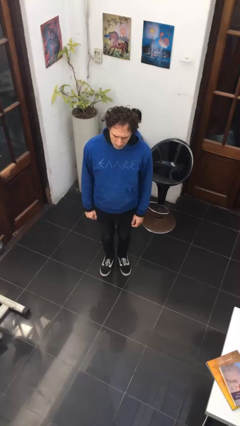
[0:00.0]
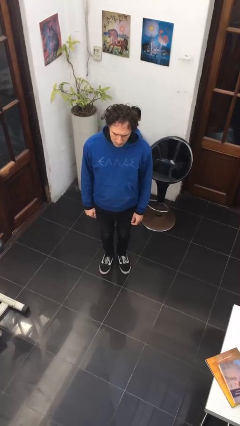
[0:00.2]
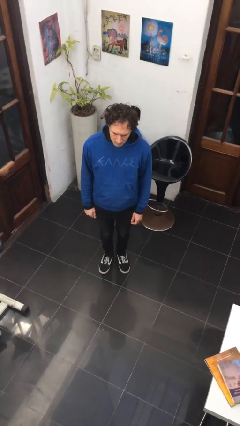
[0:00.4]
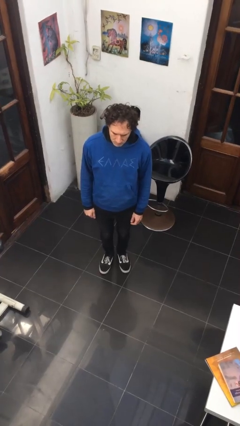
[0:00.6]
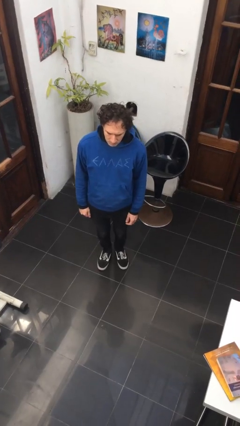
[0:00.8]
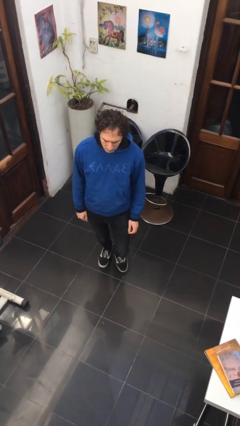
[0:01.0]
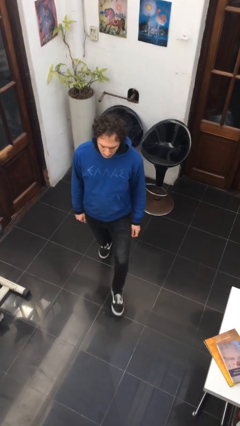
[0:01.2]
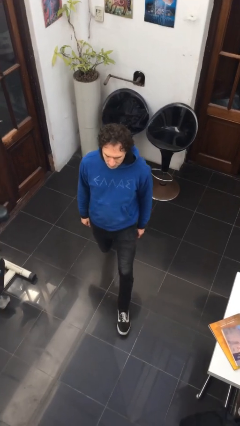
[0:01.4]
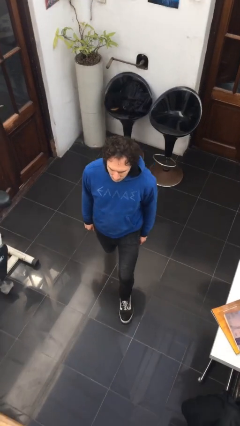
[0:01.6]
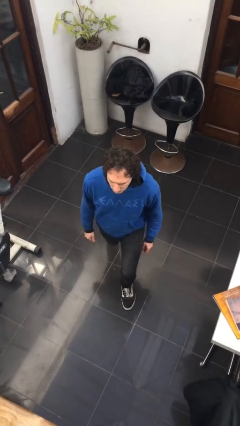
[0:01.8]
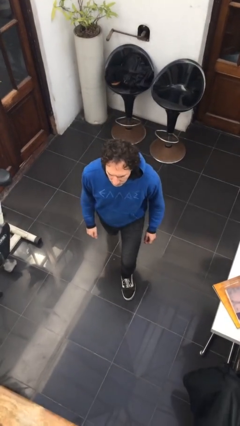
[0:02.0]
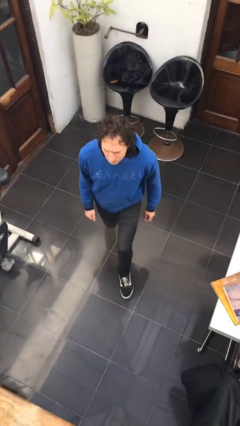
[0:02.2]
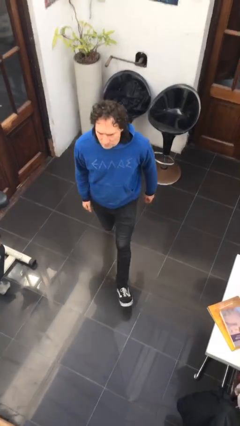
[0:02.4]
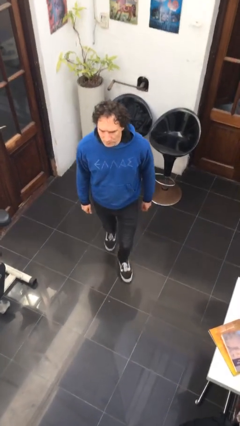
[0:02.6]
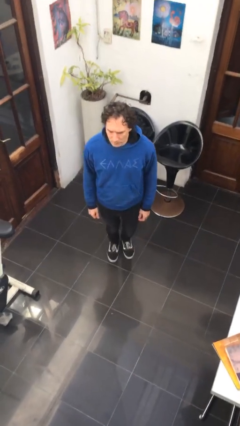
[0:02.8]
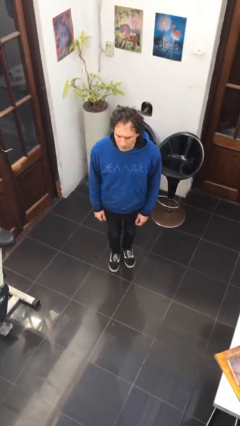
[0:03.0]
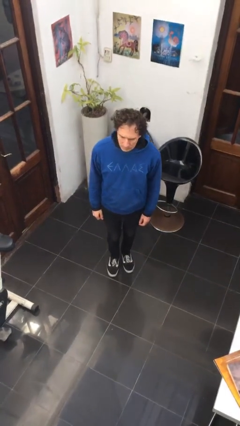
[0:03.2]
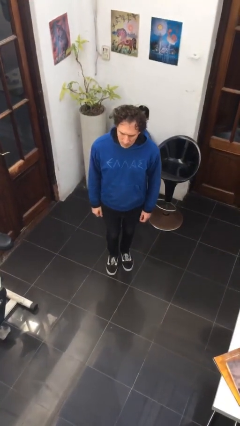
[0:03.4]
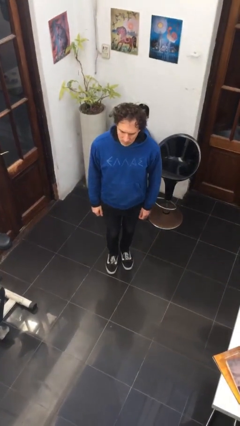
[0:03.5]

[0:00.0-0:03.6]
person exercises with lunges

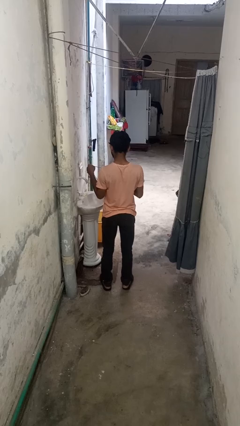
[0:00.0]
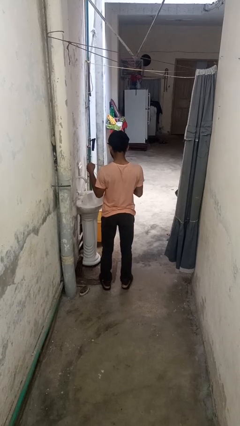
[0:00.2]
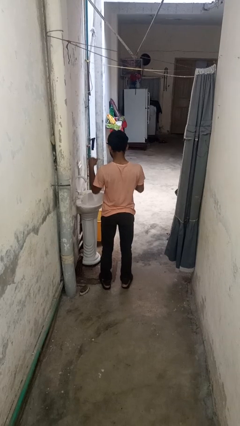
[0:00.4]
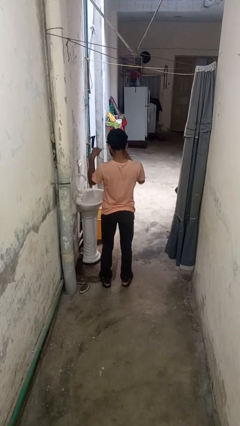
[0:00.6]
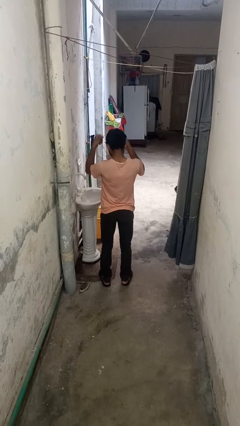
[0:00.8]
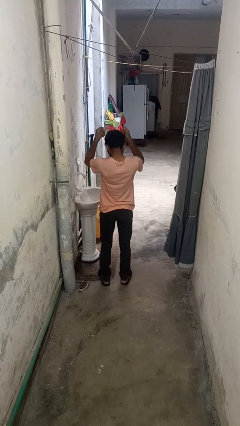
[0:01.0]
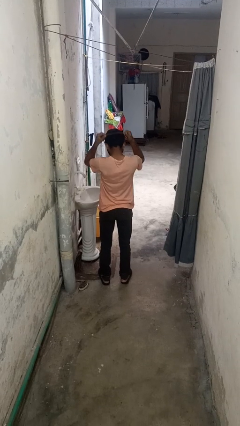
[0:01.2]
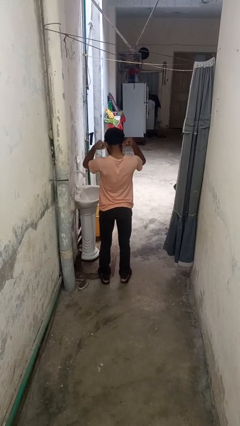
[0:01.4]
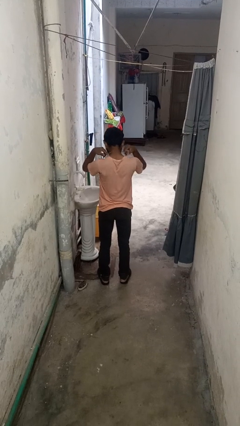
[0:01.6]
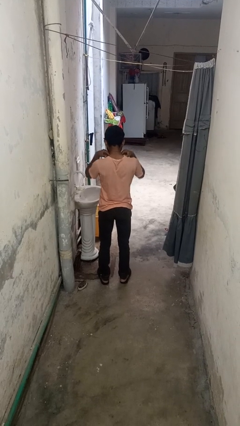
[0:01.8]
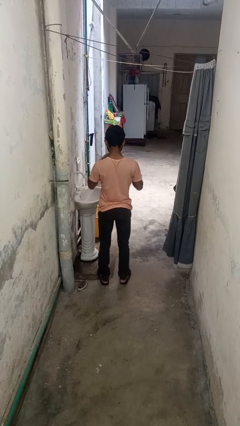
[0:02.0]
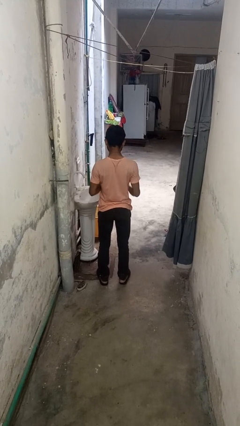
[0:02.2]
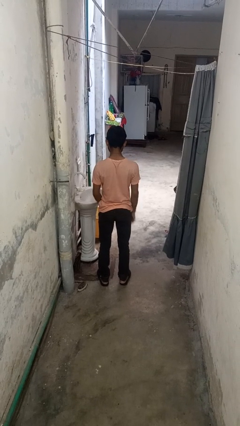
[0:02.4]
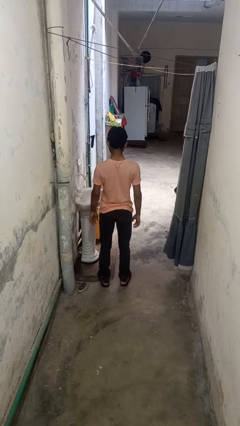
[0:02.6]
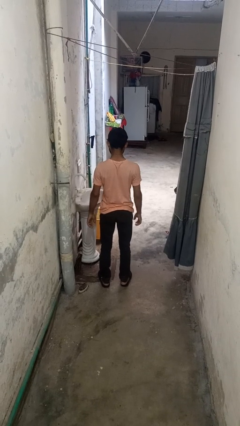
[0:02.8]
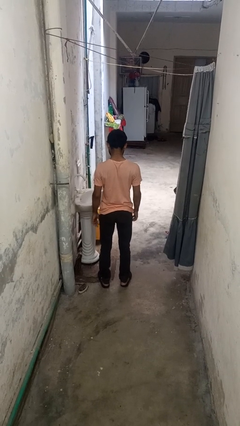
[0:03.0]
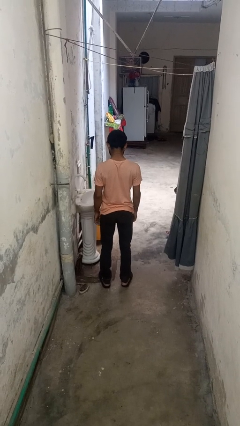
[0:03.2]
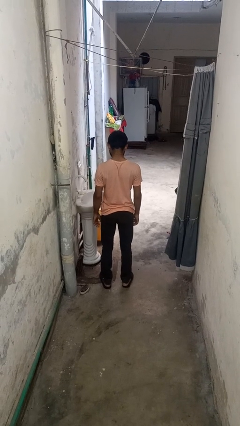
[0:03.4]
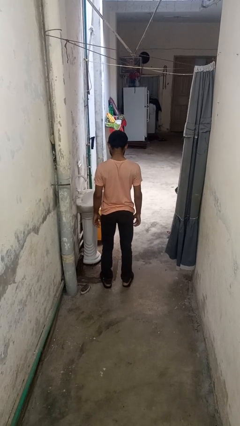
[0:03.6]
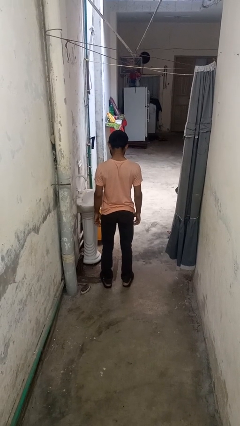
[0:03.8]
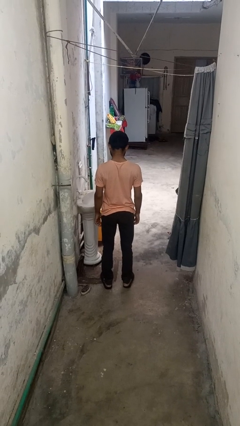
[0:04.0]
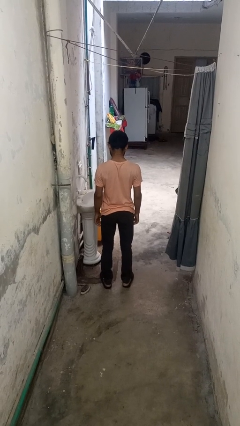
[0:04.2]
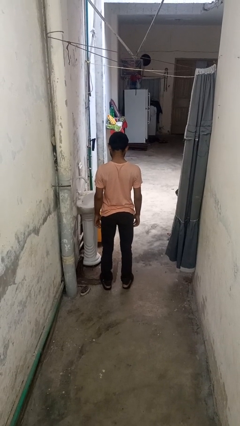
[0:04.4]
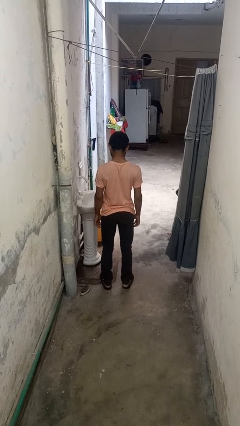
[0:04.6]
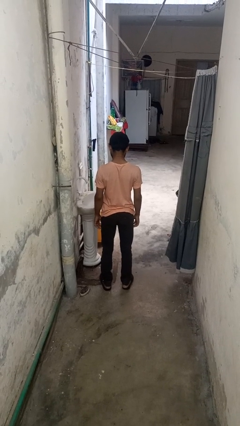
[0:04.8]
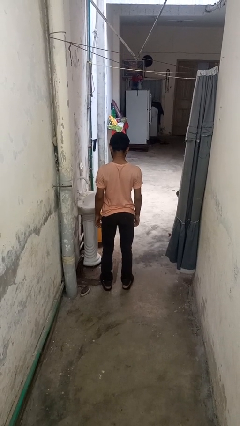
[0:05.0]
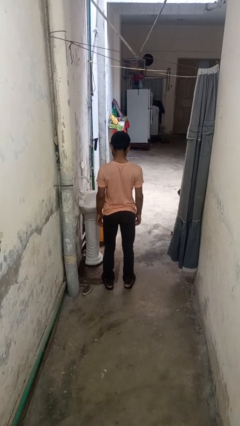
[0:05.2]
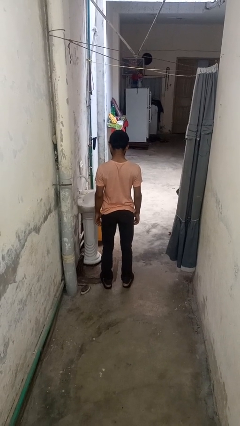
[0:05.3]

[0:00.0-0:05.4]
person puts on necklace

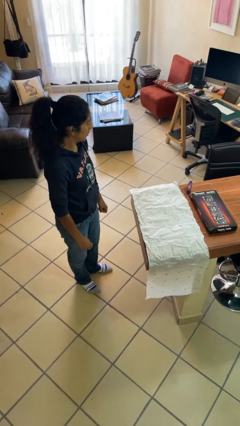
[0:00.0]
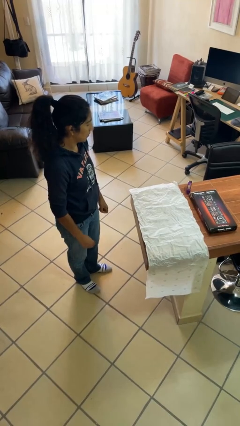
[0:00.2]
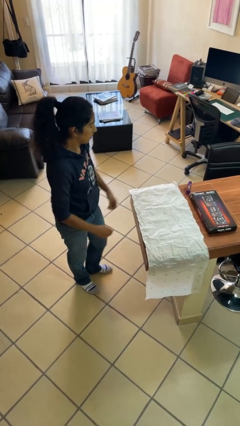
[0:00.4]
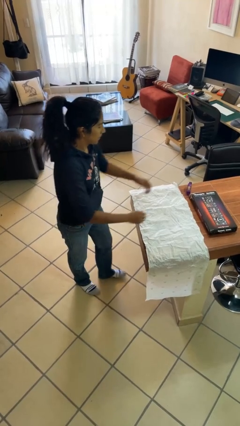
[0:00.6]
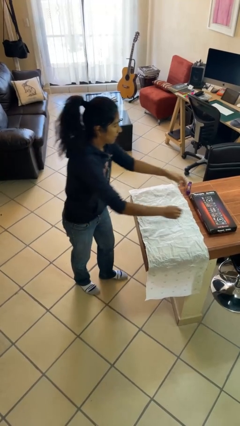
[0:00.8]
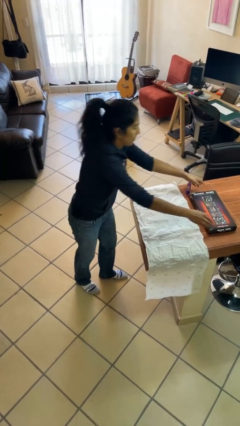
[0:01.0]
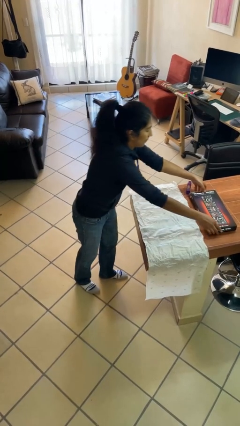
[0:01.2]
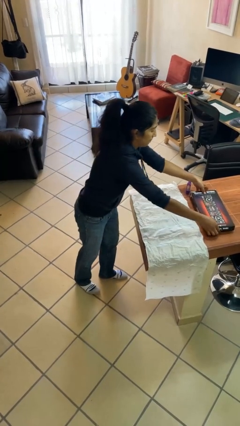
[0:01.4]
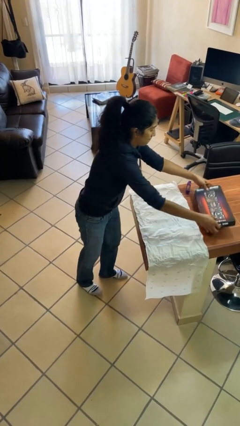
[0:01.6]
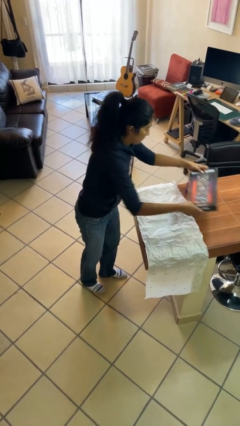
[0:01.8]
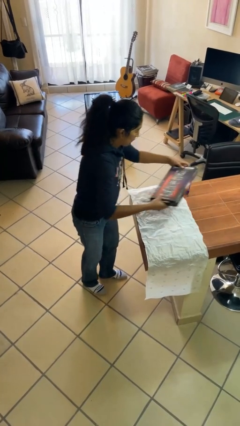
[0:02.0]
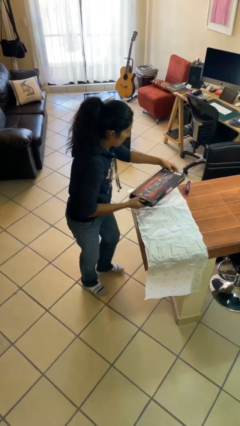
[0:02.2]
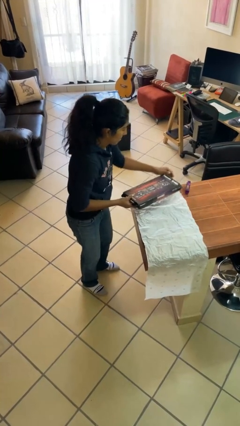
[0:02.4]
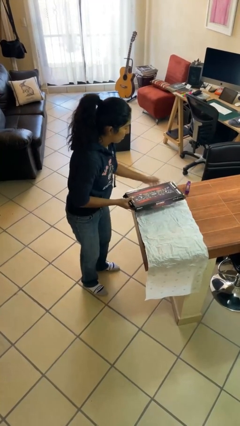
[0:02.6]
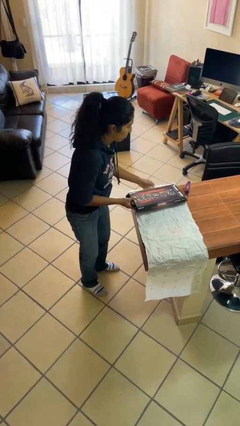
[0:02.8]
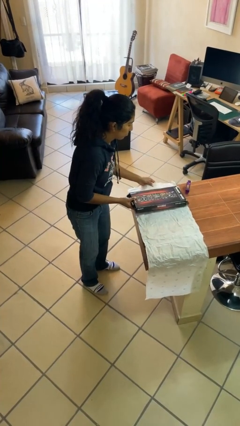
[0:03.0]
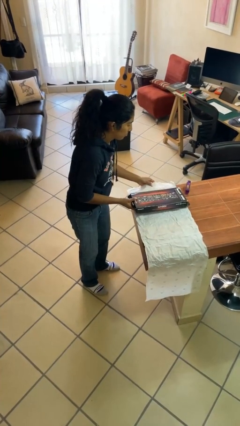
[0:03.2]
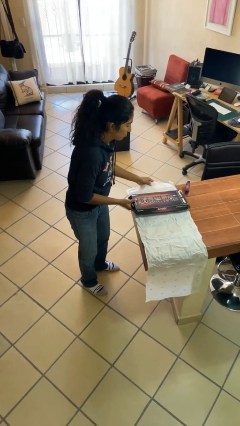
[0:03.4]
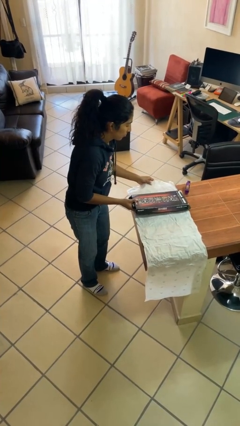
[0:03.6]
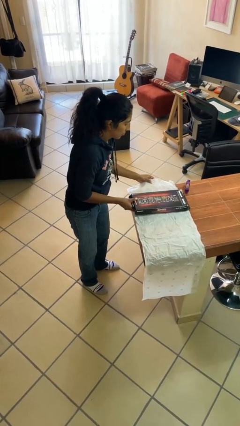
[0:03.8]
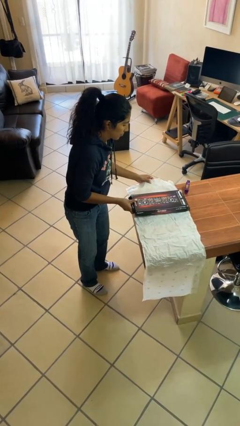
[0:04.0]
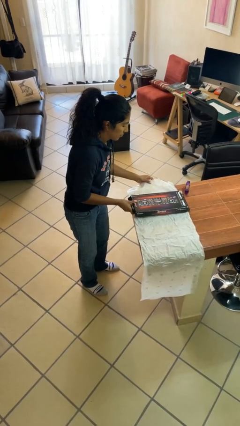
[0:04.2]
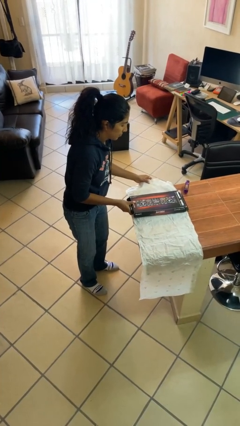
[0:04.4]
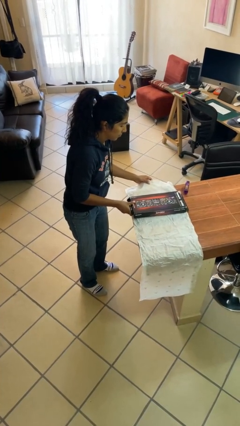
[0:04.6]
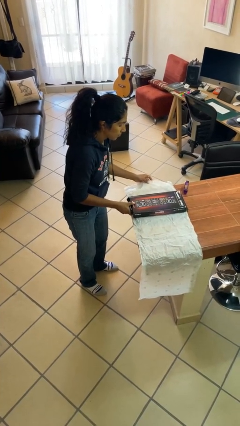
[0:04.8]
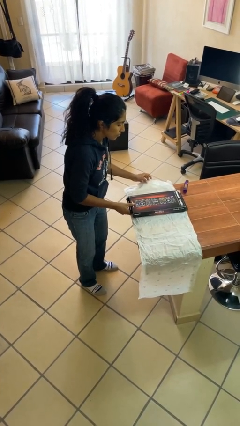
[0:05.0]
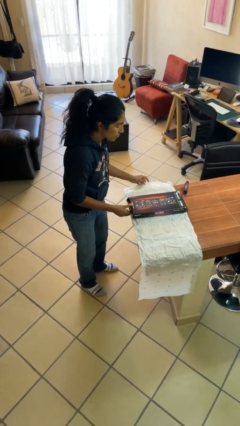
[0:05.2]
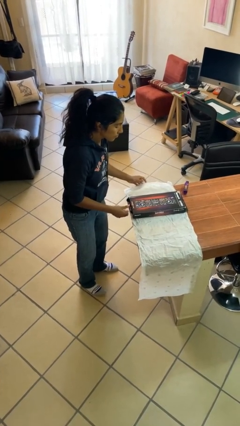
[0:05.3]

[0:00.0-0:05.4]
person wraps box

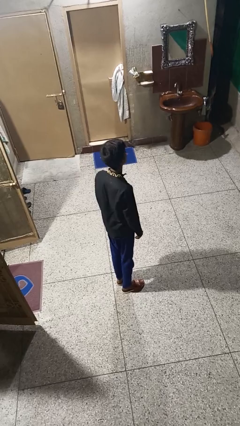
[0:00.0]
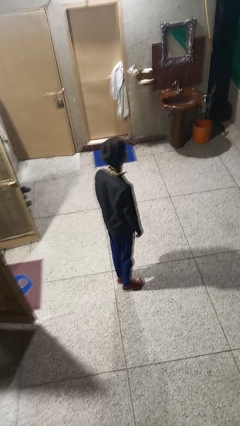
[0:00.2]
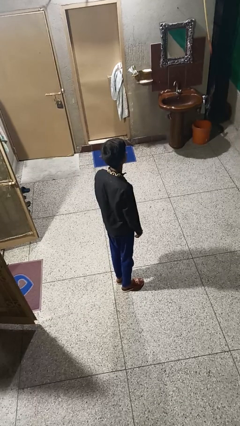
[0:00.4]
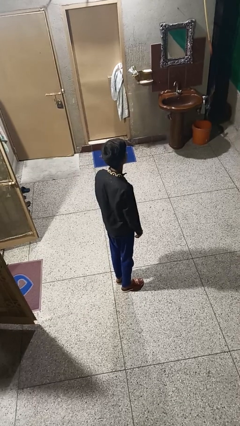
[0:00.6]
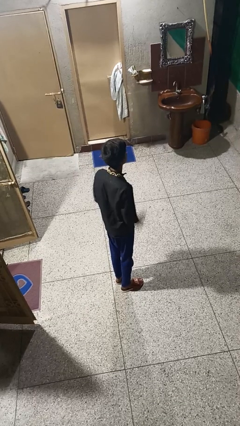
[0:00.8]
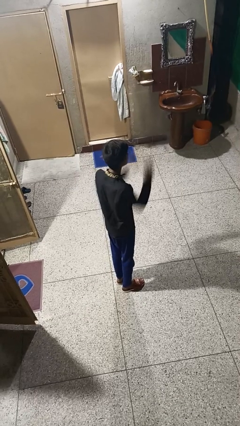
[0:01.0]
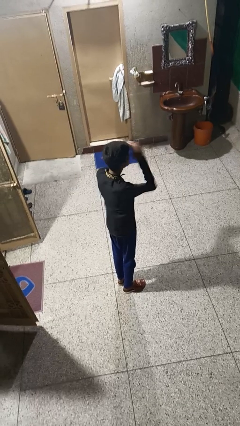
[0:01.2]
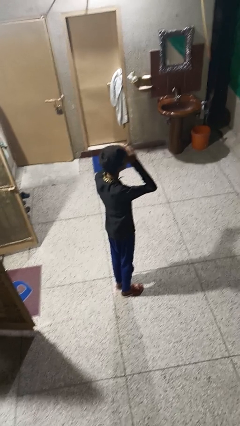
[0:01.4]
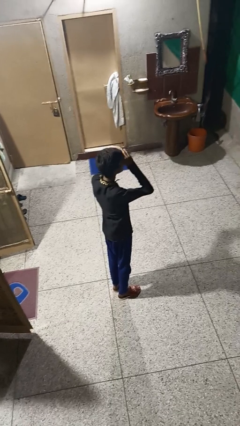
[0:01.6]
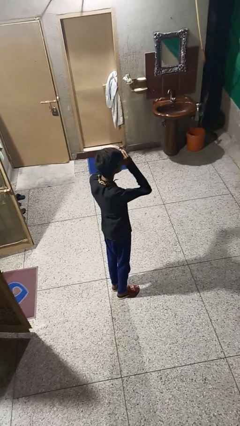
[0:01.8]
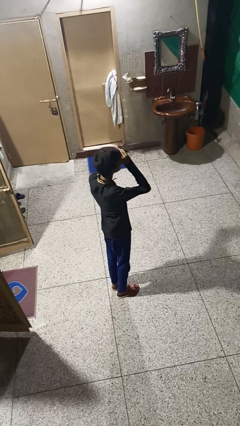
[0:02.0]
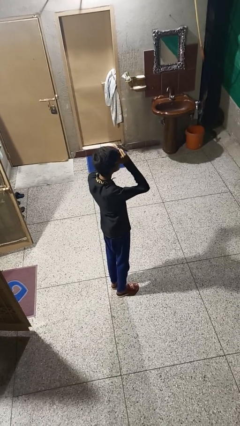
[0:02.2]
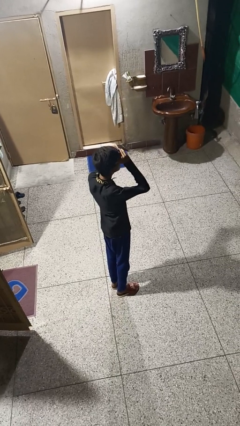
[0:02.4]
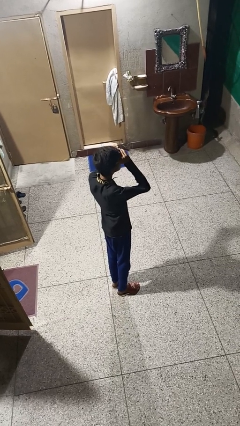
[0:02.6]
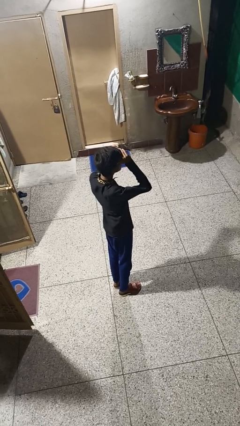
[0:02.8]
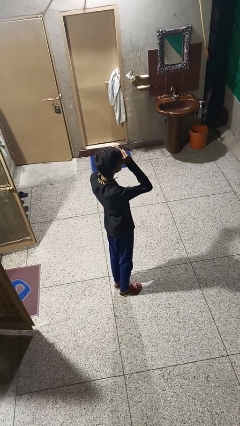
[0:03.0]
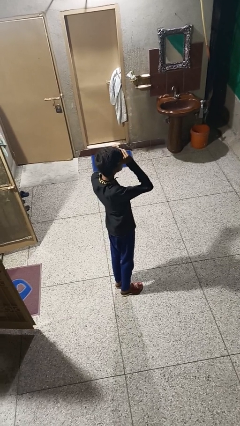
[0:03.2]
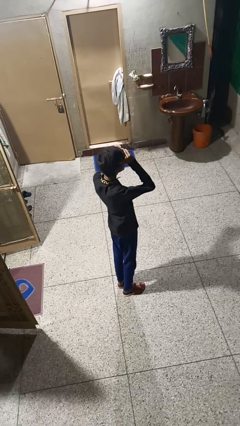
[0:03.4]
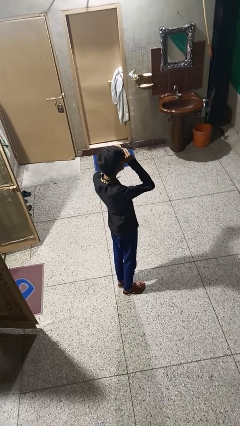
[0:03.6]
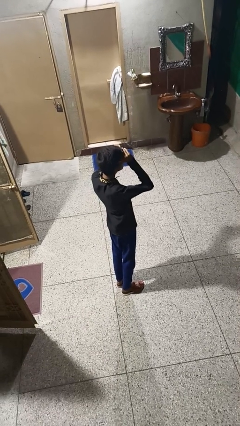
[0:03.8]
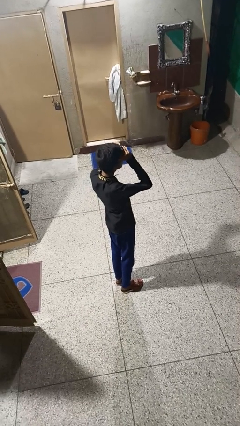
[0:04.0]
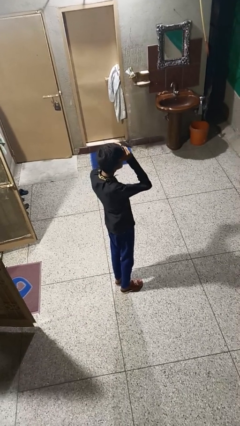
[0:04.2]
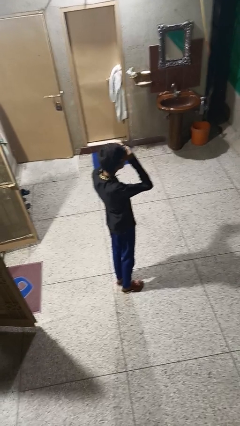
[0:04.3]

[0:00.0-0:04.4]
person shades eyes
